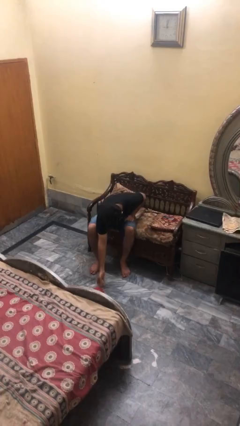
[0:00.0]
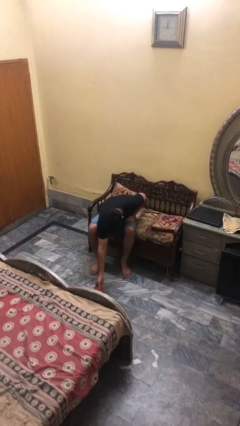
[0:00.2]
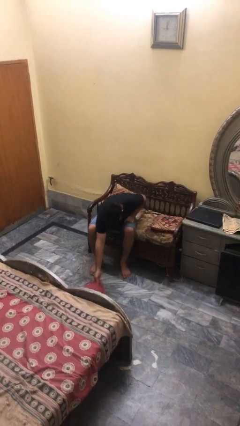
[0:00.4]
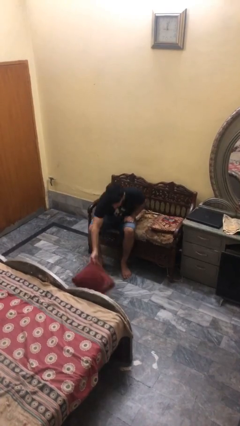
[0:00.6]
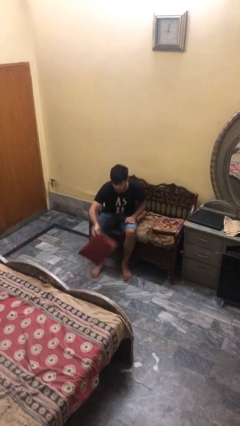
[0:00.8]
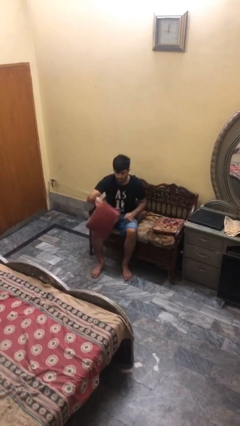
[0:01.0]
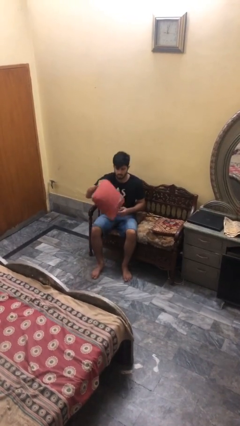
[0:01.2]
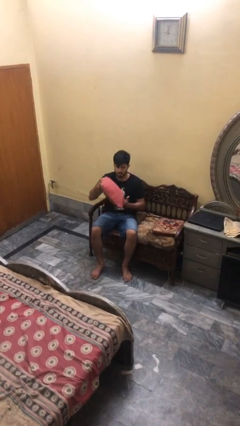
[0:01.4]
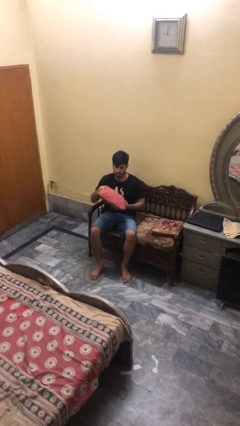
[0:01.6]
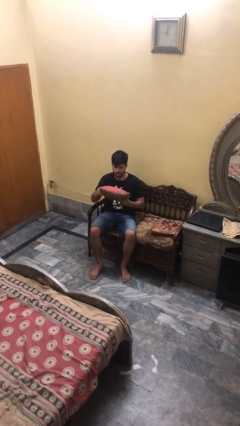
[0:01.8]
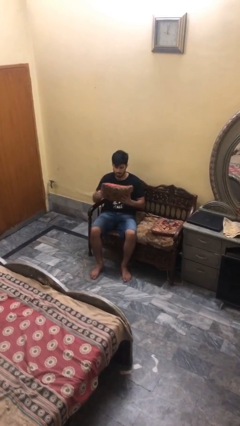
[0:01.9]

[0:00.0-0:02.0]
person picks up object from floor

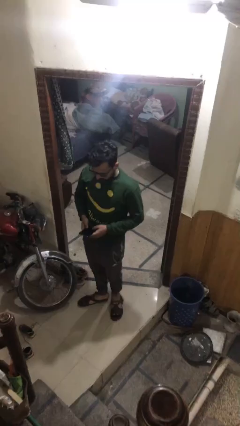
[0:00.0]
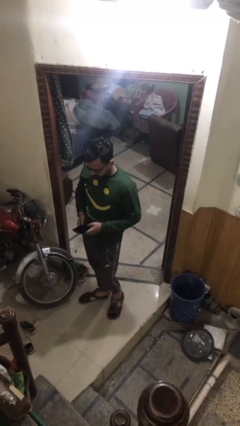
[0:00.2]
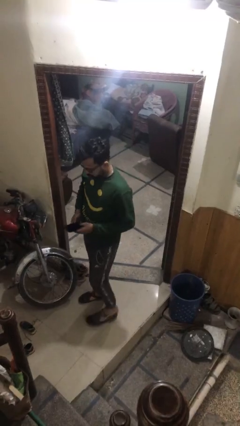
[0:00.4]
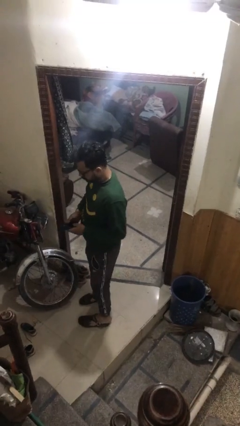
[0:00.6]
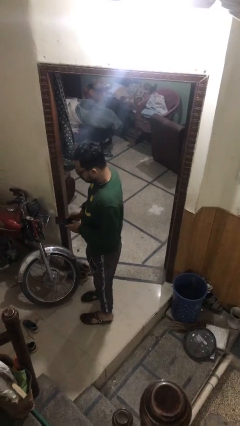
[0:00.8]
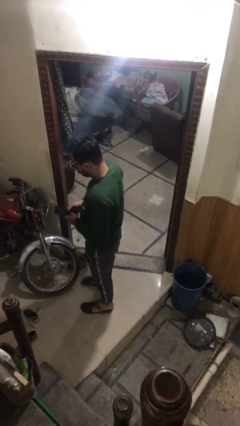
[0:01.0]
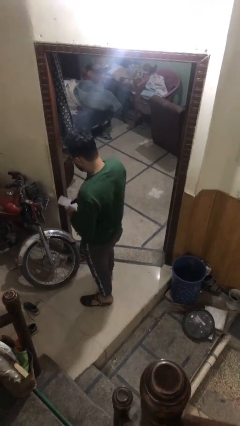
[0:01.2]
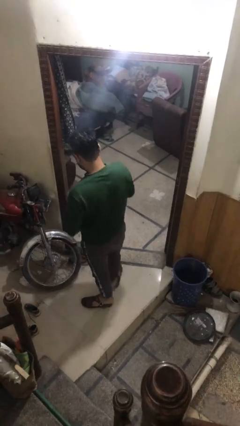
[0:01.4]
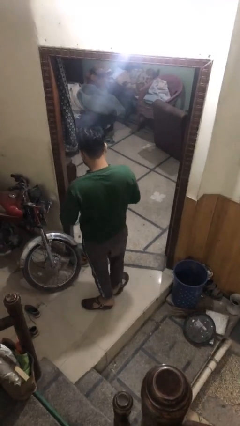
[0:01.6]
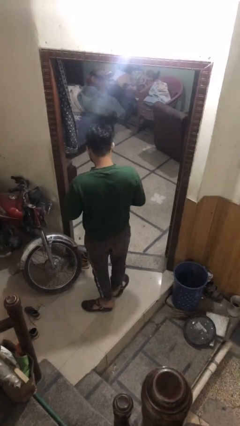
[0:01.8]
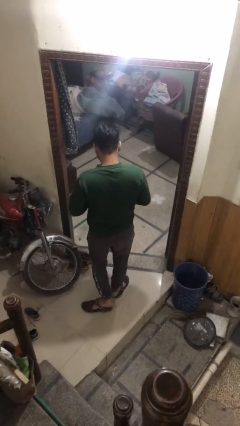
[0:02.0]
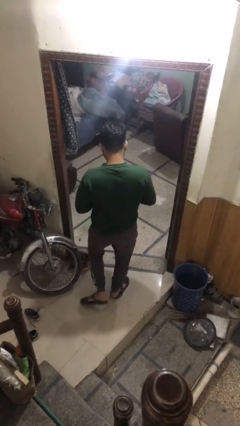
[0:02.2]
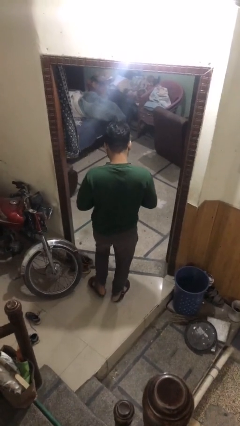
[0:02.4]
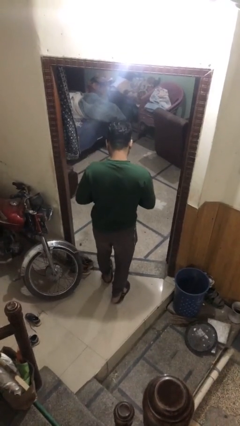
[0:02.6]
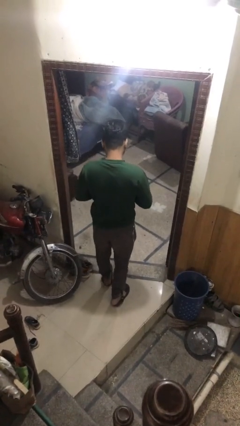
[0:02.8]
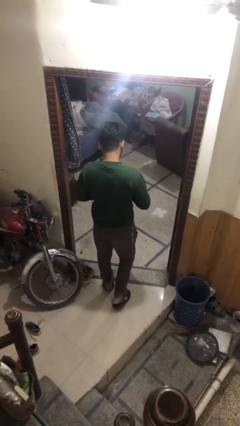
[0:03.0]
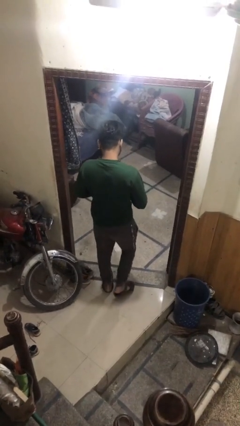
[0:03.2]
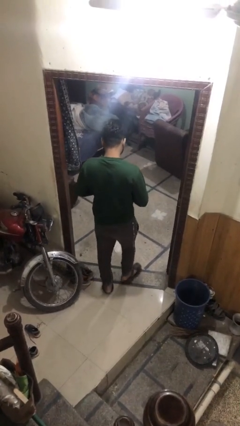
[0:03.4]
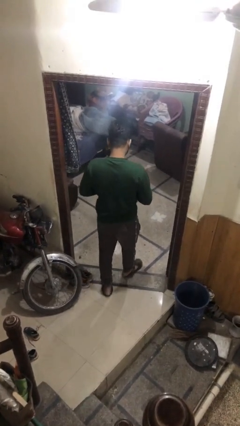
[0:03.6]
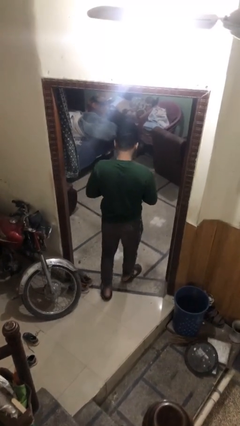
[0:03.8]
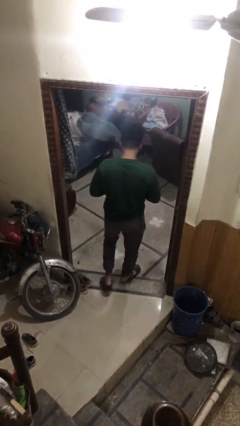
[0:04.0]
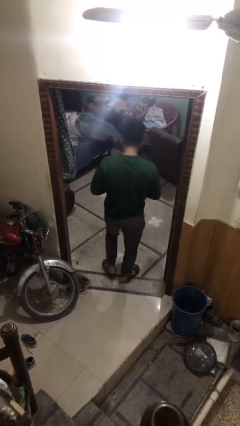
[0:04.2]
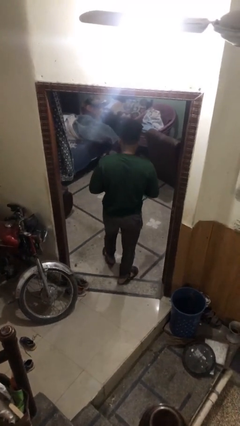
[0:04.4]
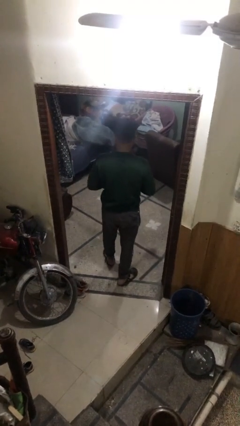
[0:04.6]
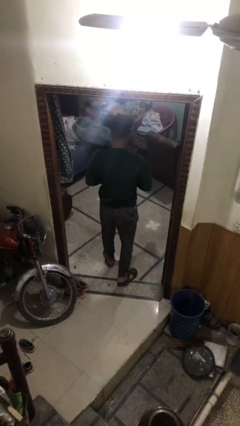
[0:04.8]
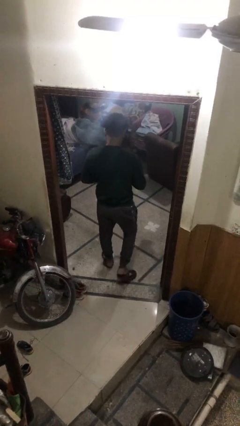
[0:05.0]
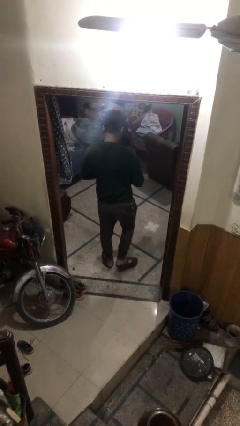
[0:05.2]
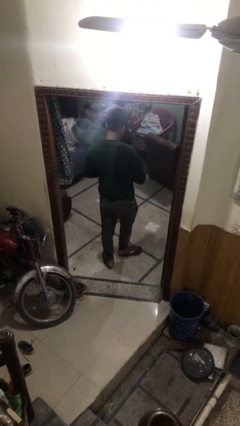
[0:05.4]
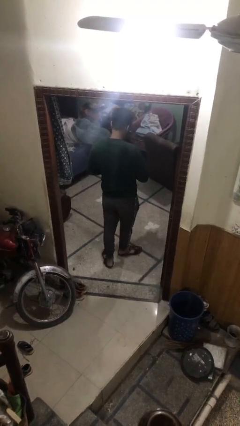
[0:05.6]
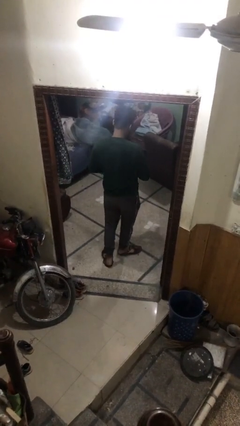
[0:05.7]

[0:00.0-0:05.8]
person exits scene through structure

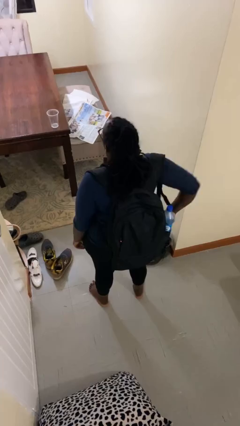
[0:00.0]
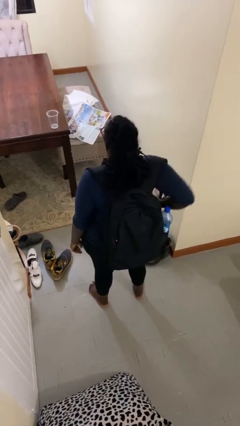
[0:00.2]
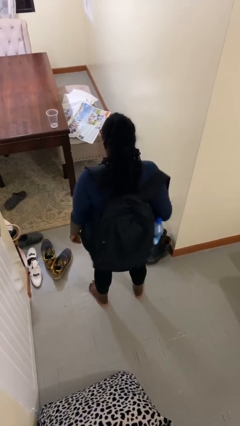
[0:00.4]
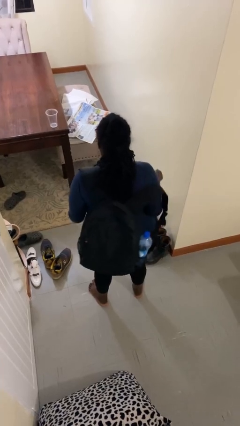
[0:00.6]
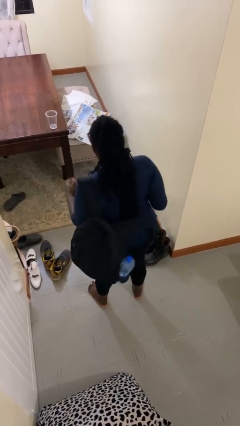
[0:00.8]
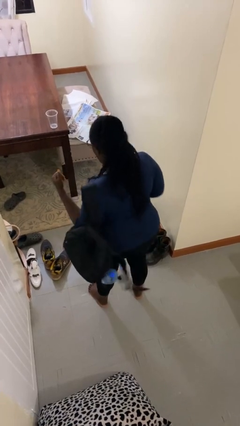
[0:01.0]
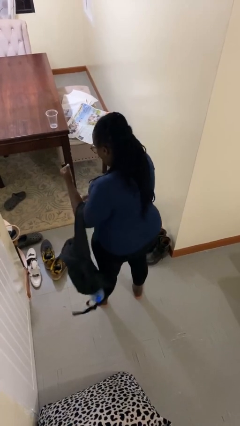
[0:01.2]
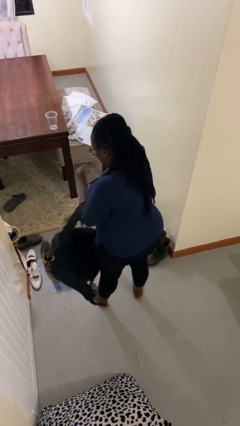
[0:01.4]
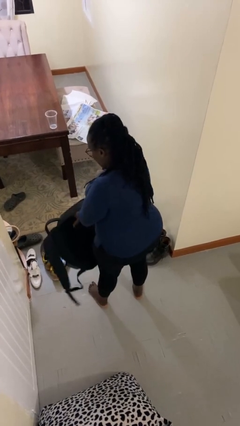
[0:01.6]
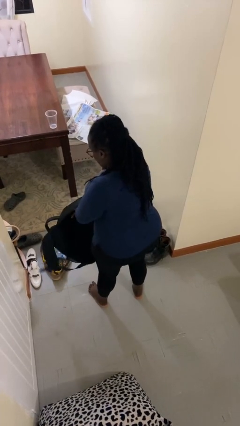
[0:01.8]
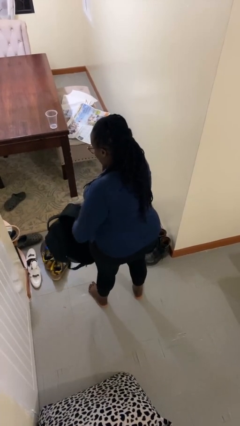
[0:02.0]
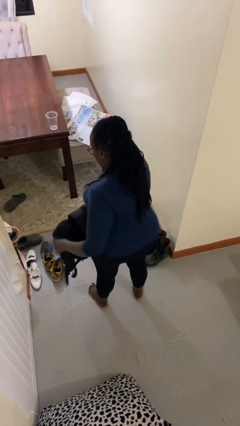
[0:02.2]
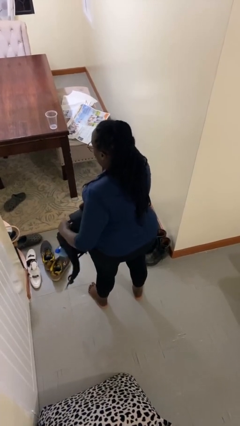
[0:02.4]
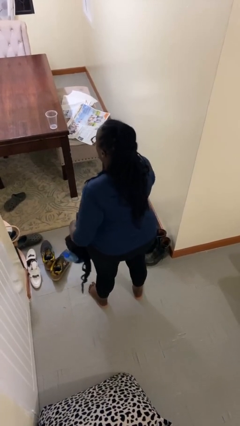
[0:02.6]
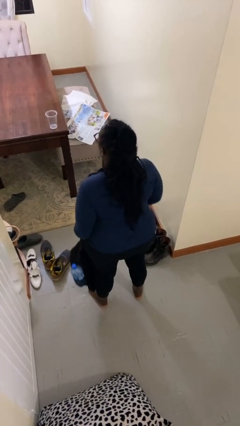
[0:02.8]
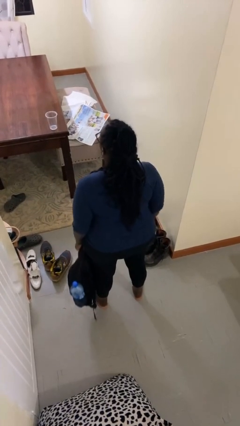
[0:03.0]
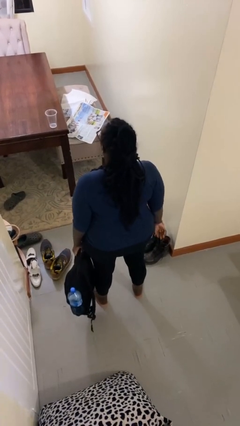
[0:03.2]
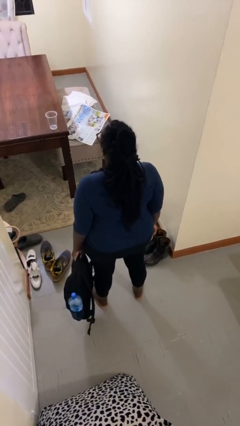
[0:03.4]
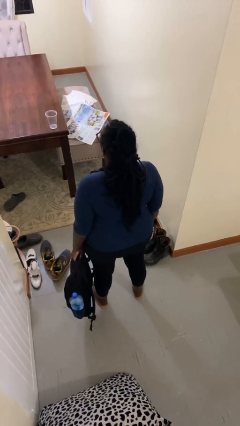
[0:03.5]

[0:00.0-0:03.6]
person takes off backpack

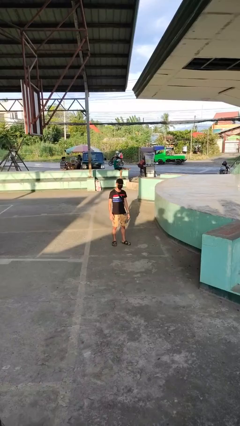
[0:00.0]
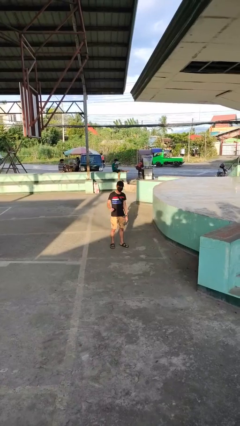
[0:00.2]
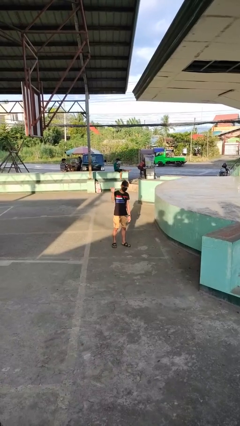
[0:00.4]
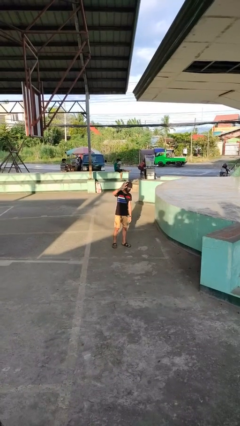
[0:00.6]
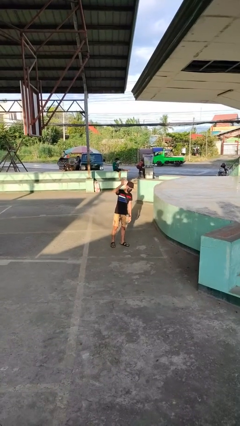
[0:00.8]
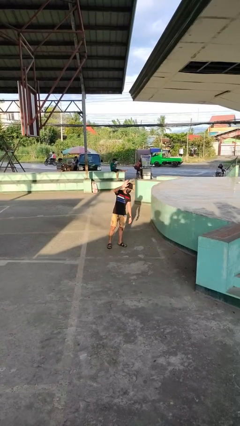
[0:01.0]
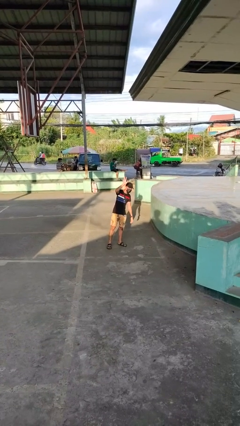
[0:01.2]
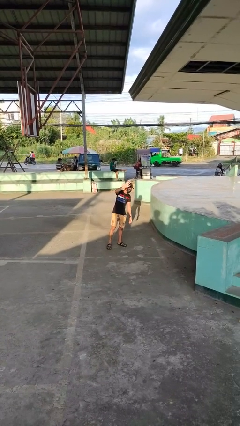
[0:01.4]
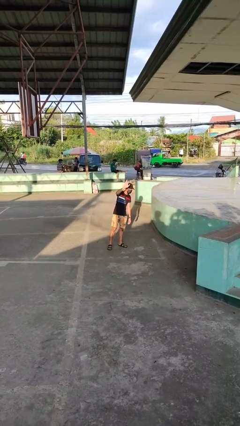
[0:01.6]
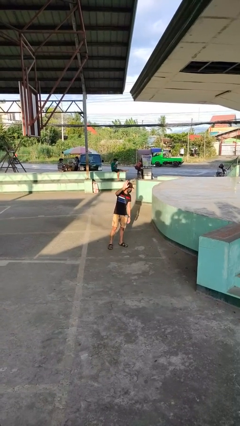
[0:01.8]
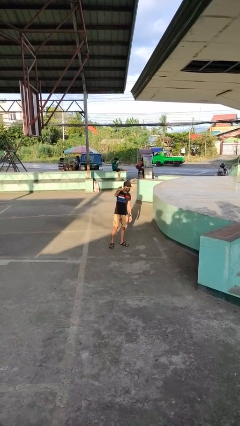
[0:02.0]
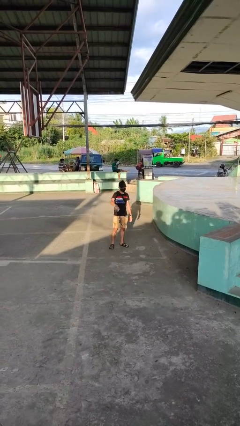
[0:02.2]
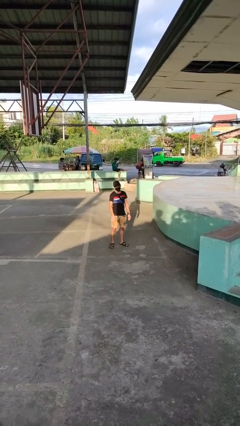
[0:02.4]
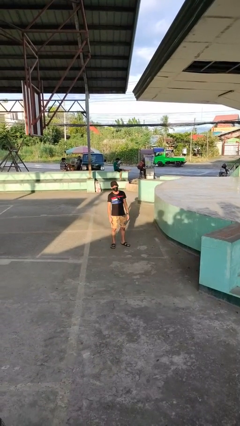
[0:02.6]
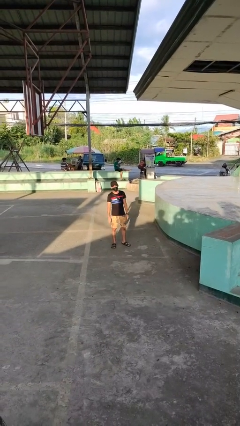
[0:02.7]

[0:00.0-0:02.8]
person waves at person

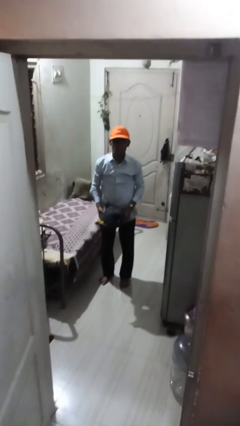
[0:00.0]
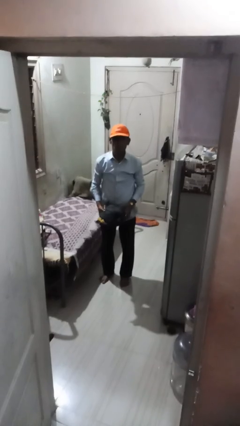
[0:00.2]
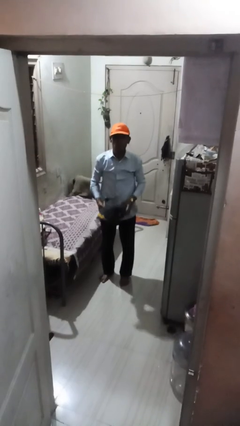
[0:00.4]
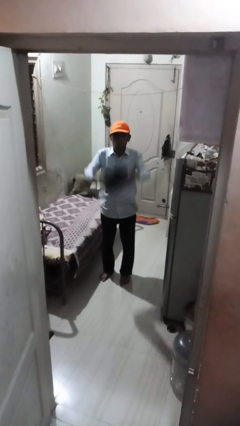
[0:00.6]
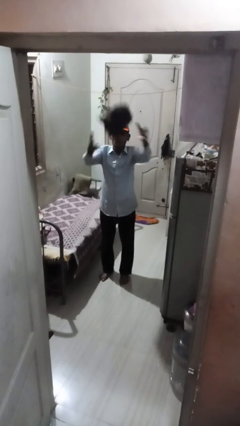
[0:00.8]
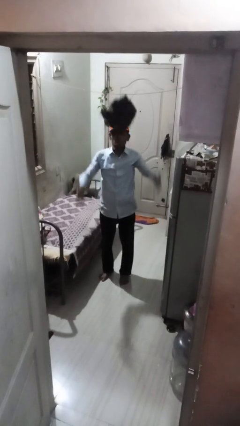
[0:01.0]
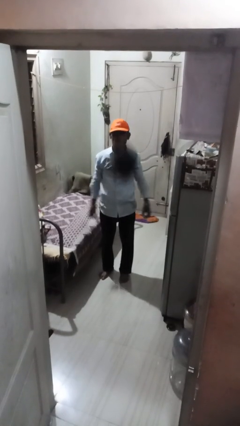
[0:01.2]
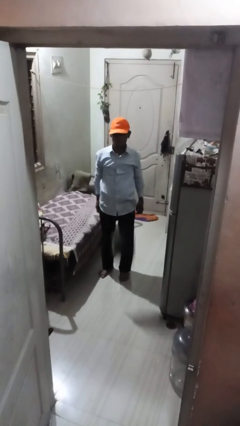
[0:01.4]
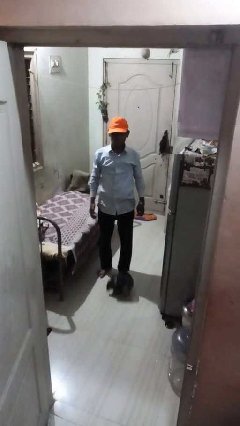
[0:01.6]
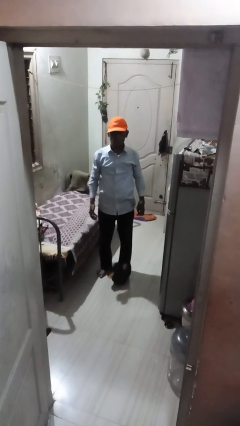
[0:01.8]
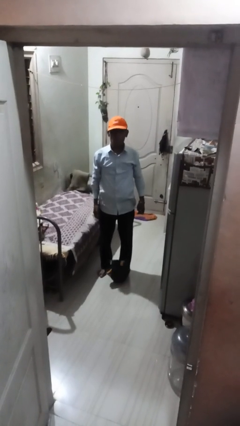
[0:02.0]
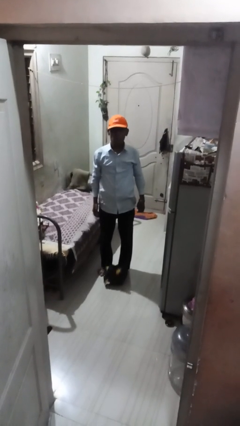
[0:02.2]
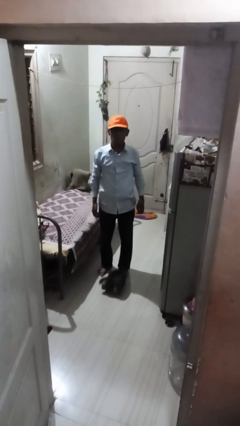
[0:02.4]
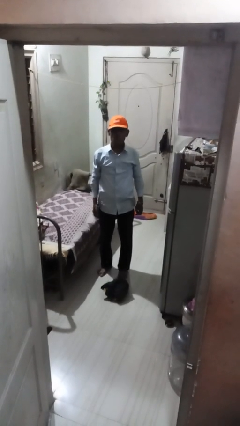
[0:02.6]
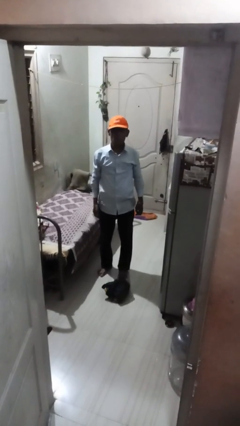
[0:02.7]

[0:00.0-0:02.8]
person throws object into air

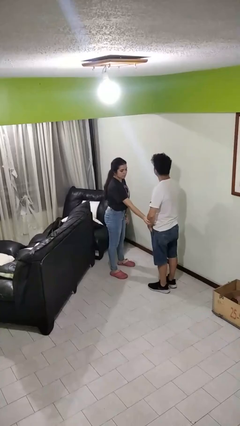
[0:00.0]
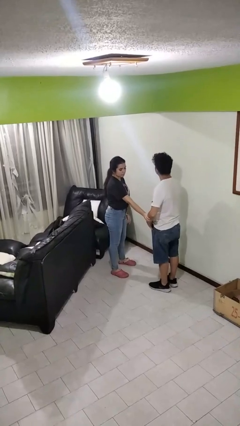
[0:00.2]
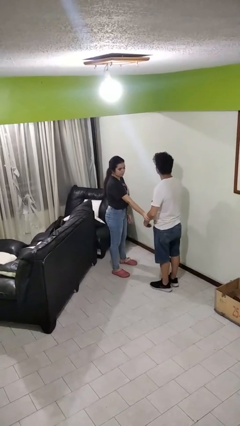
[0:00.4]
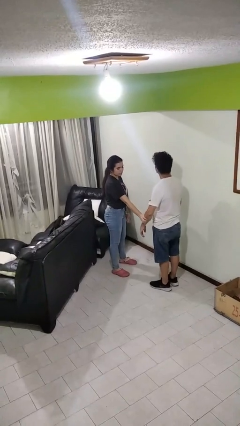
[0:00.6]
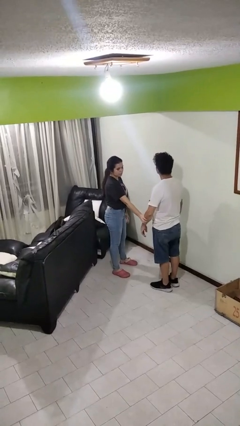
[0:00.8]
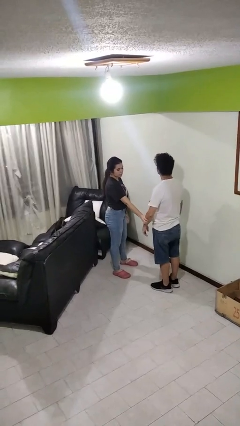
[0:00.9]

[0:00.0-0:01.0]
person grabs person by forearm
